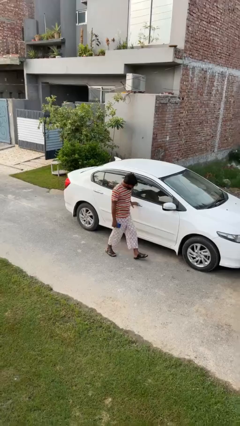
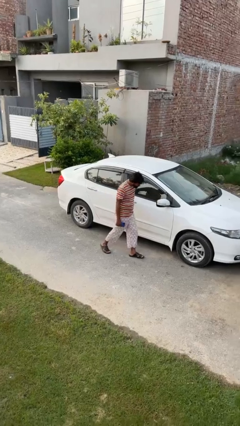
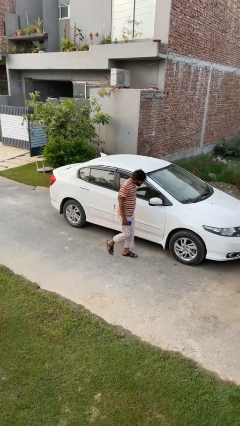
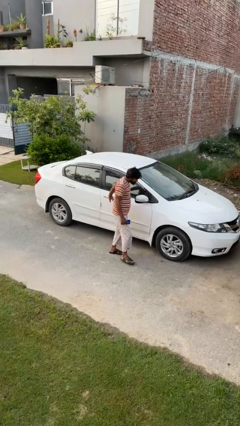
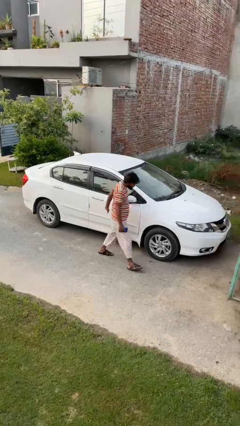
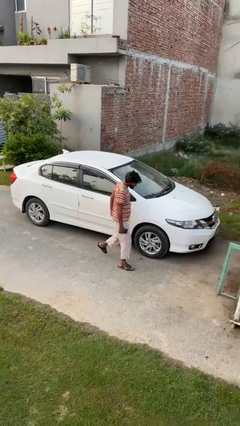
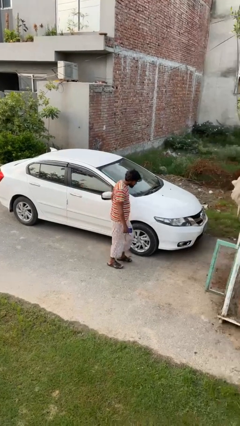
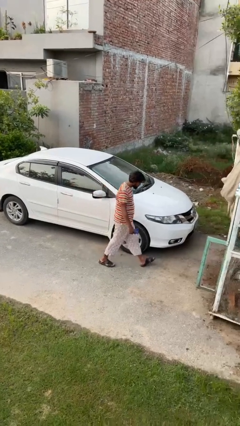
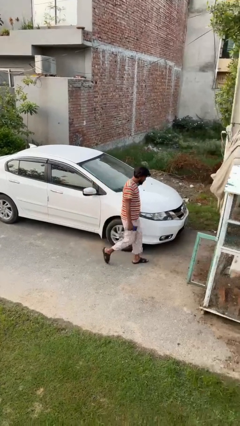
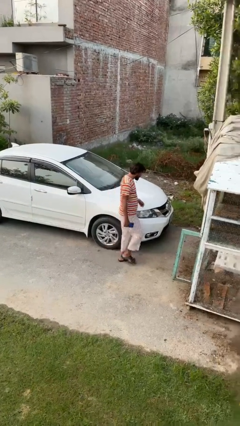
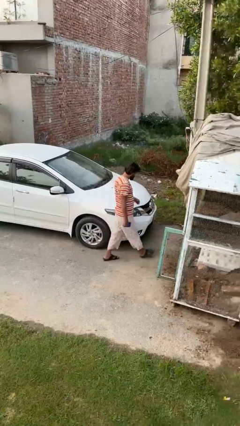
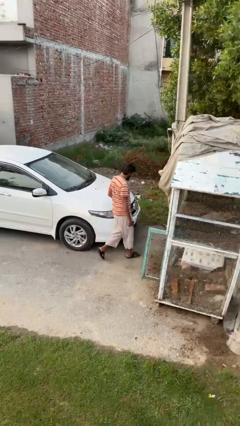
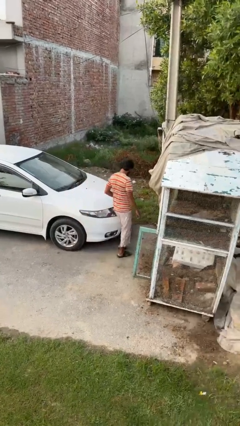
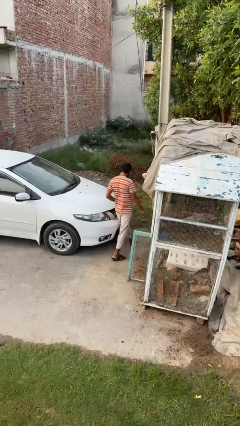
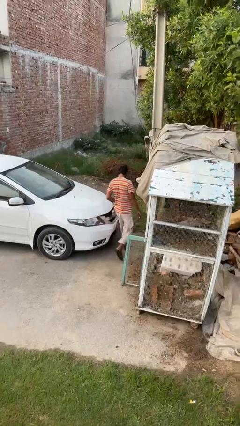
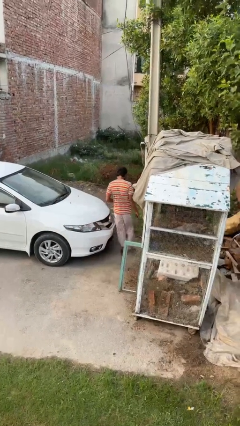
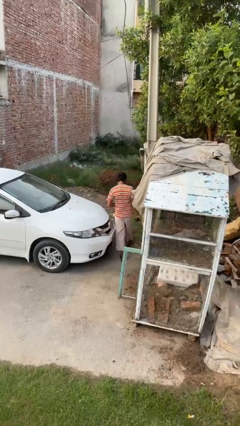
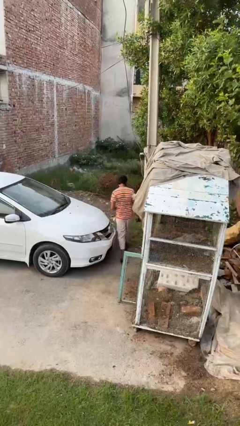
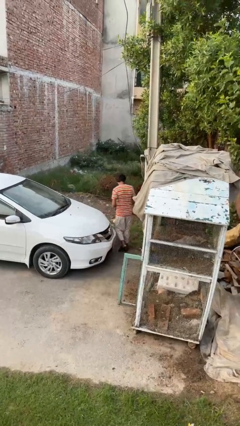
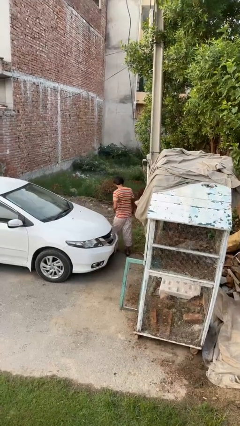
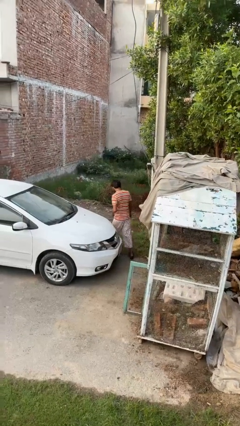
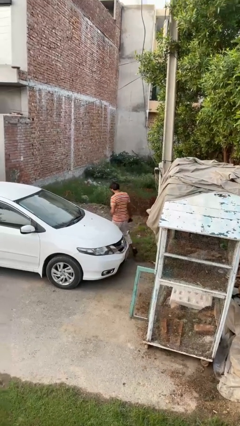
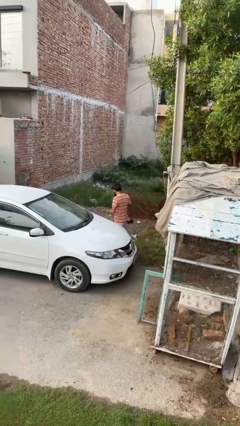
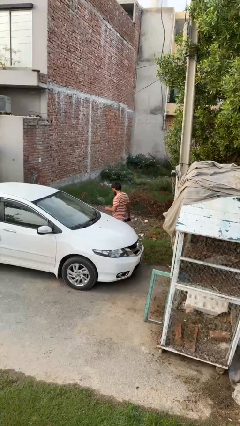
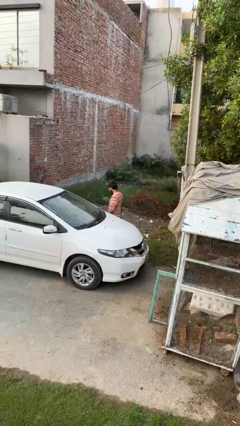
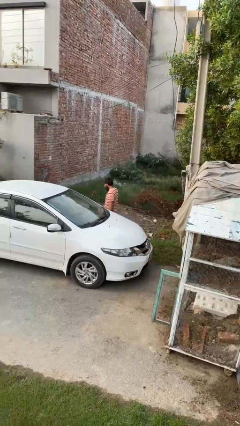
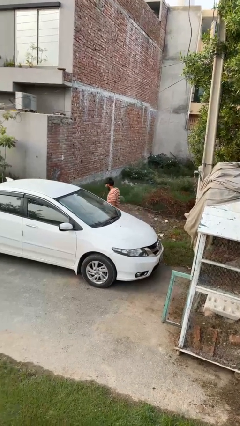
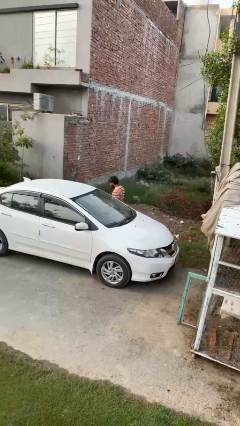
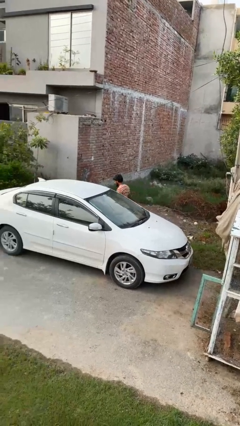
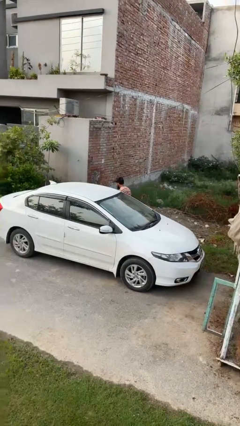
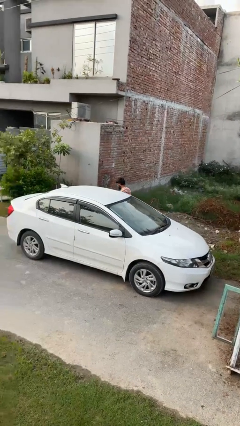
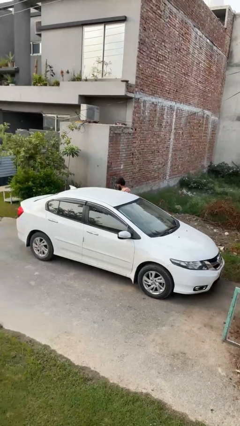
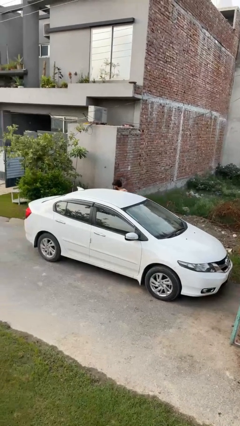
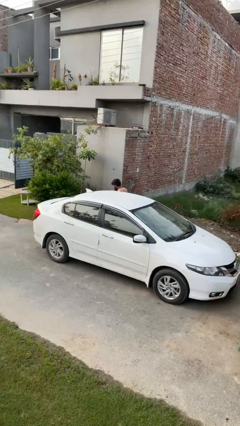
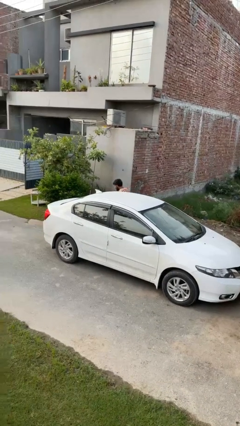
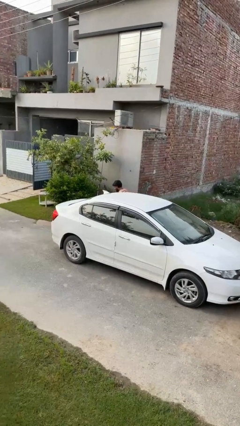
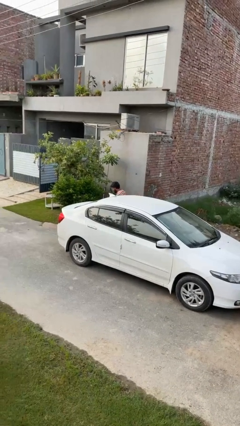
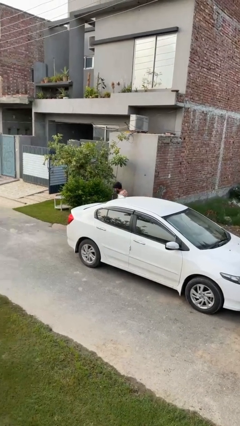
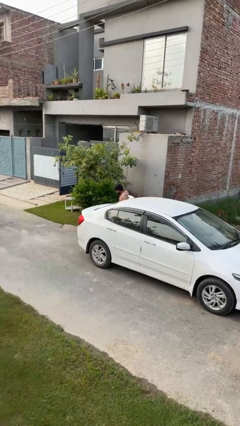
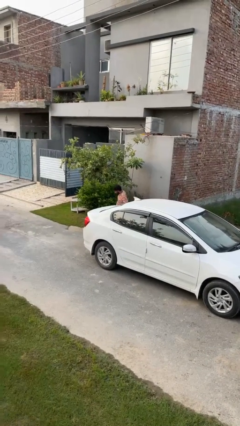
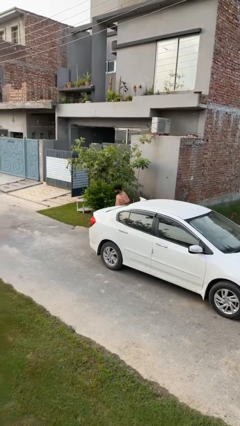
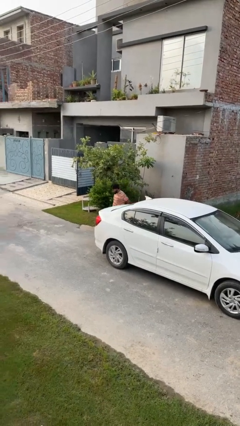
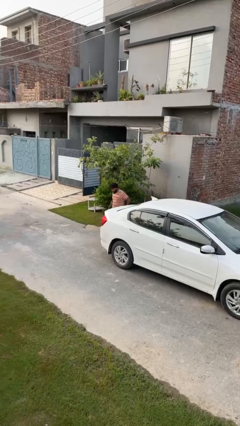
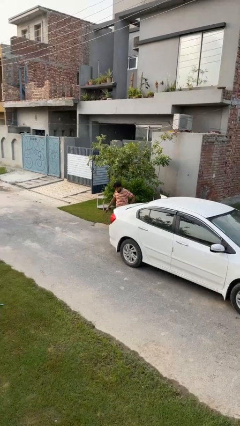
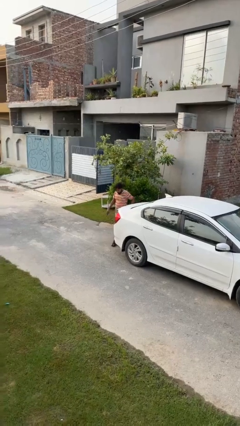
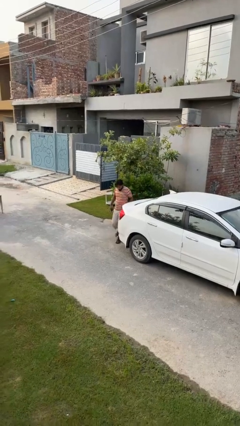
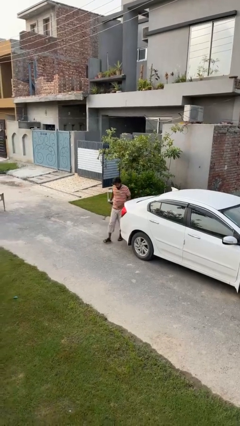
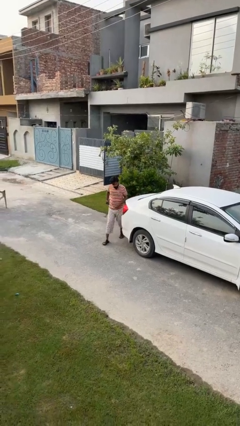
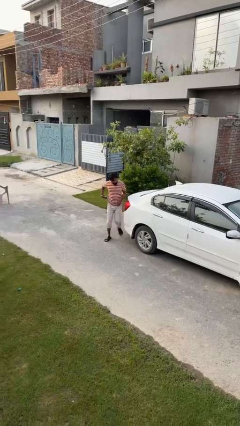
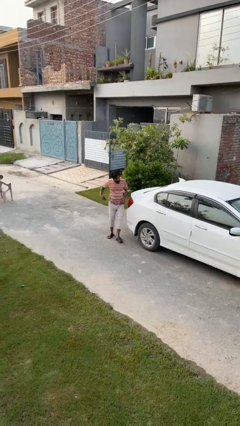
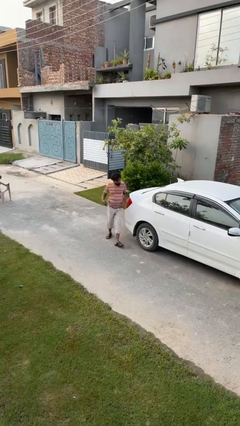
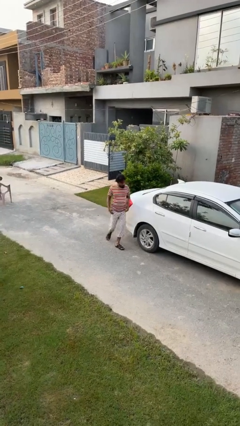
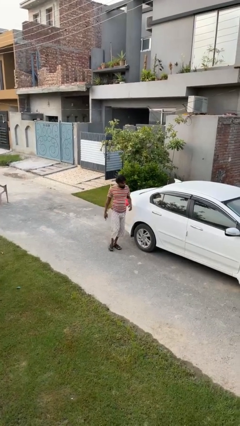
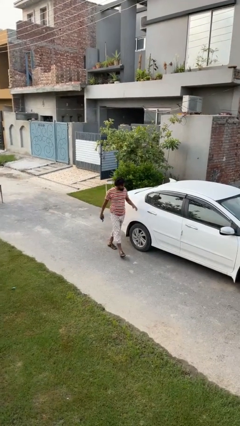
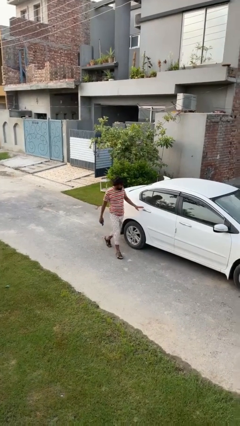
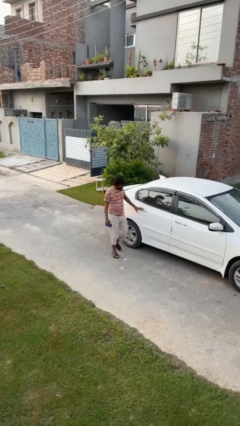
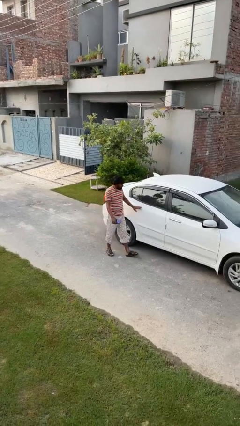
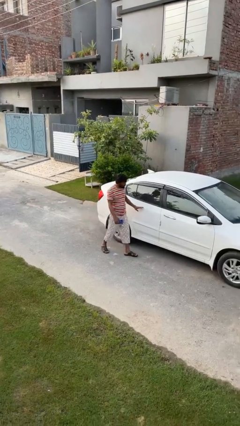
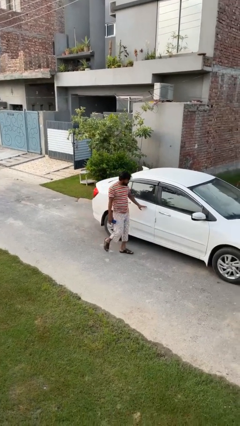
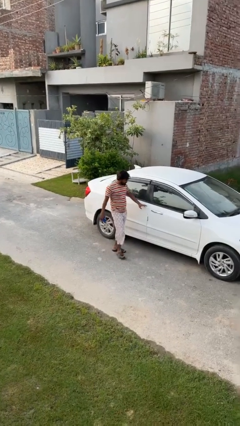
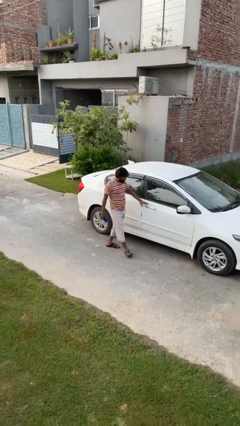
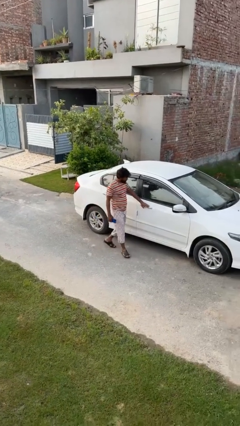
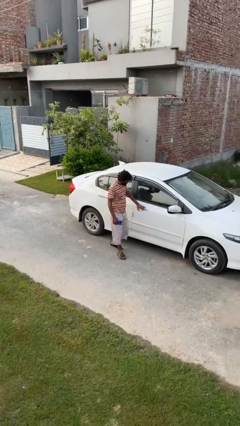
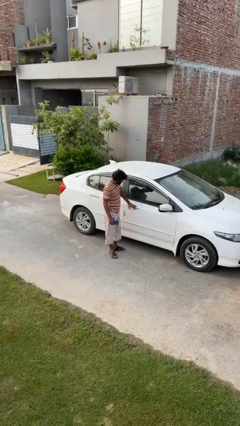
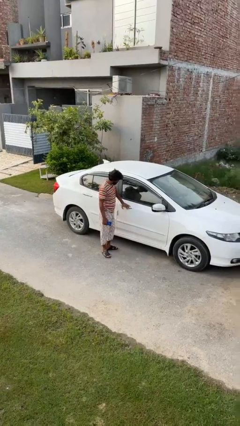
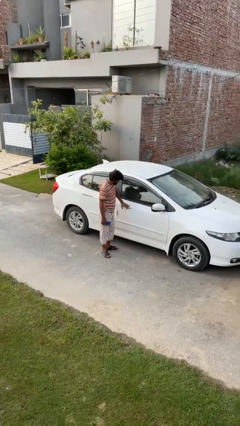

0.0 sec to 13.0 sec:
person walks around car

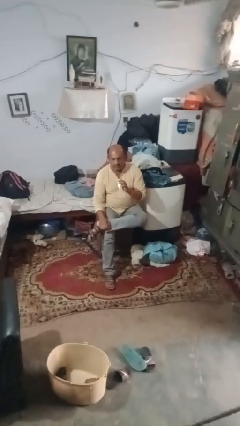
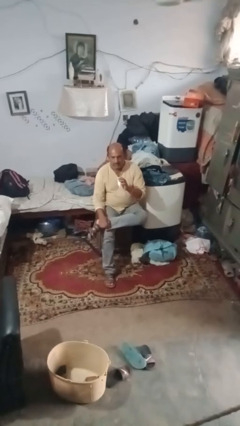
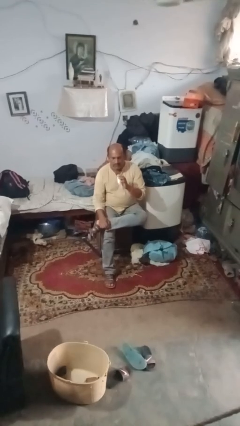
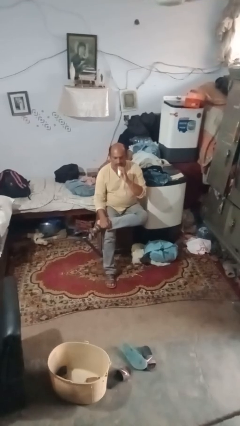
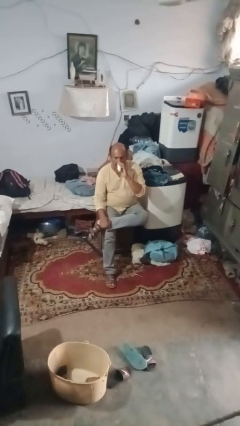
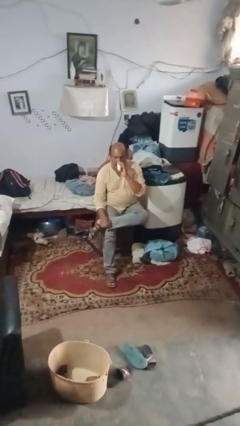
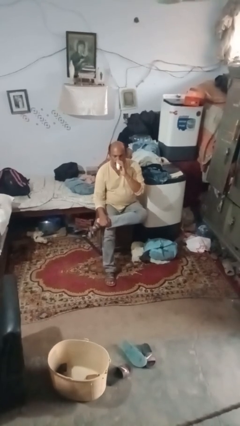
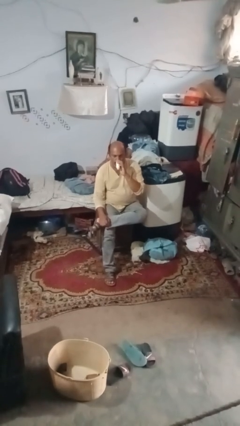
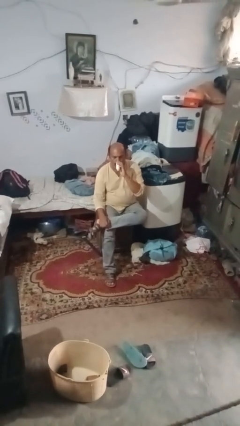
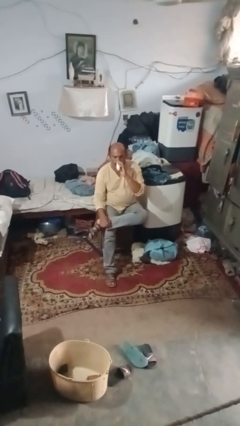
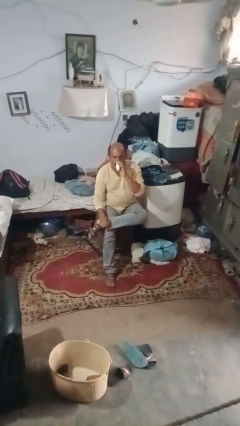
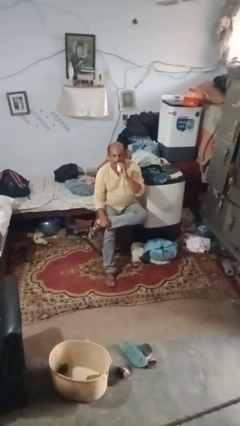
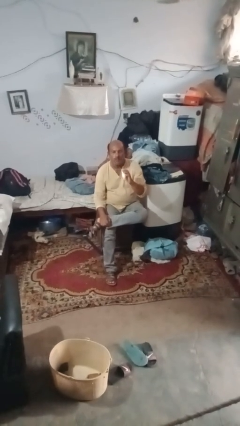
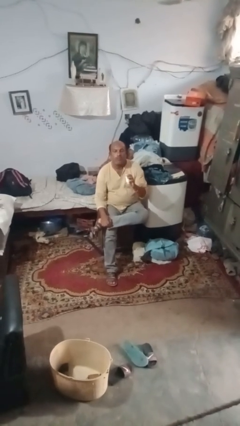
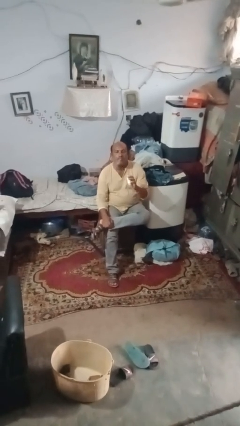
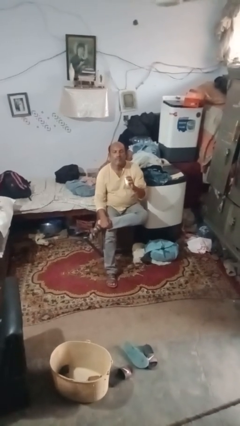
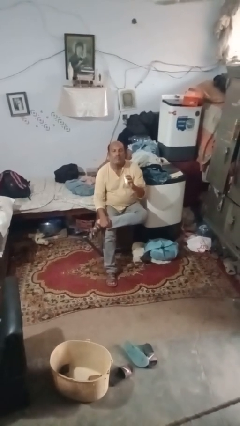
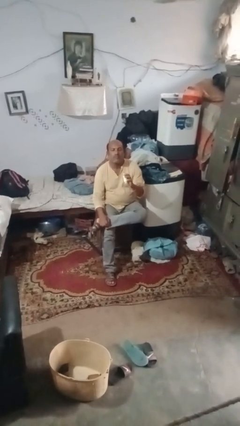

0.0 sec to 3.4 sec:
person vapes

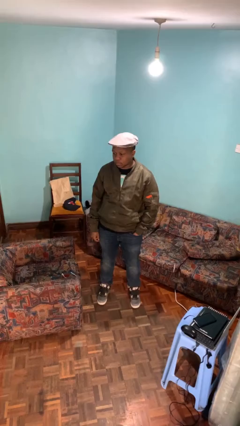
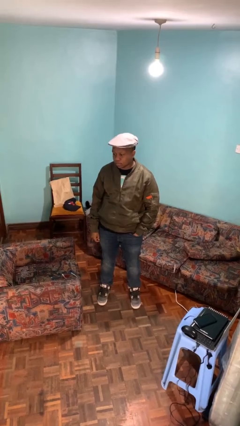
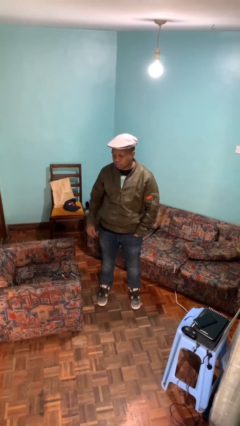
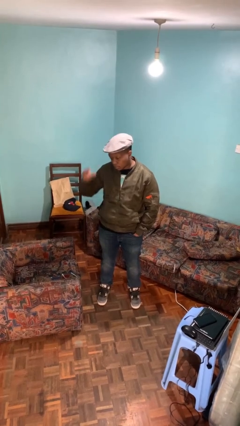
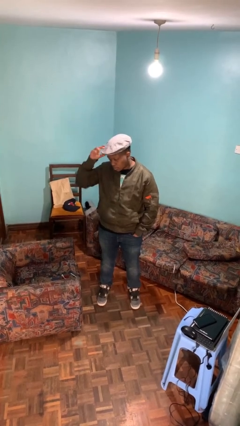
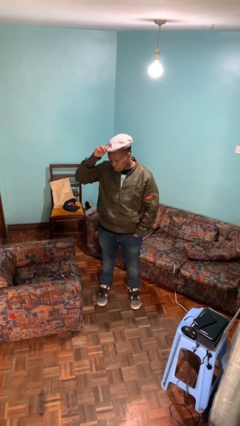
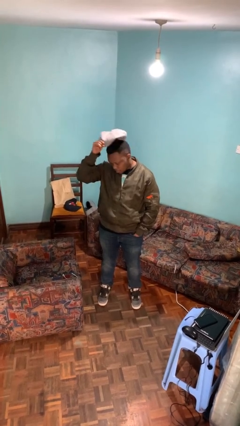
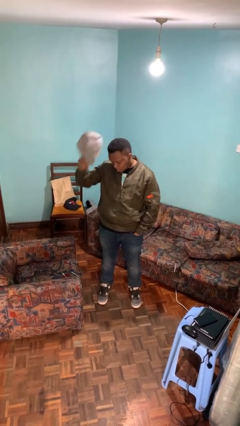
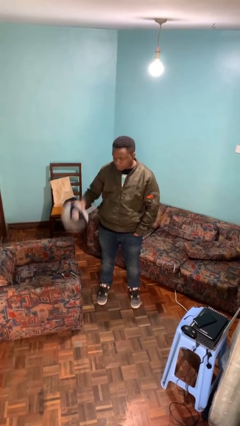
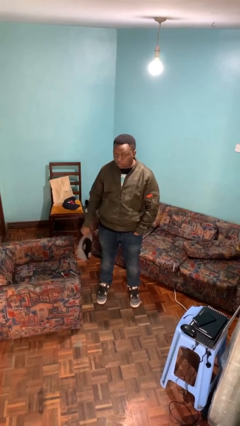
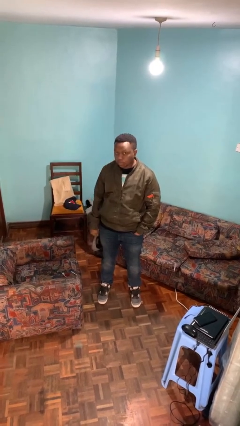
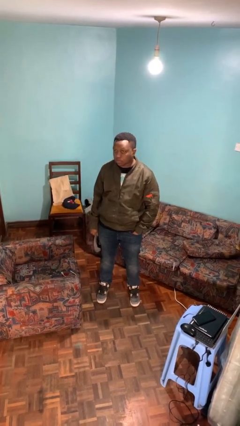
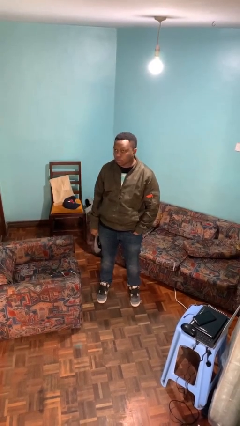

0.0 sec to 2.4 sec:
person takes off hat
